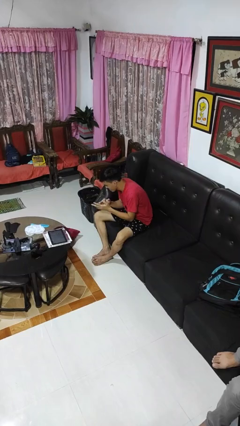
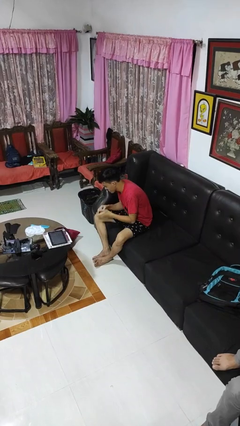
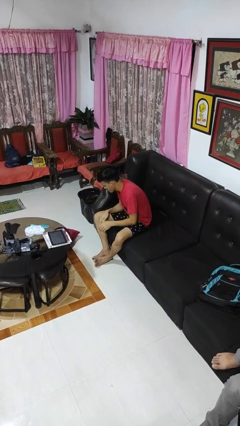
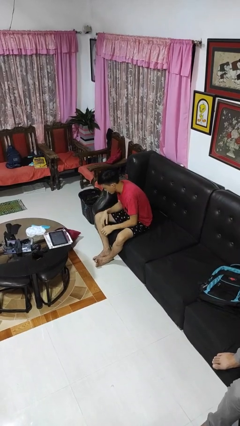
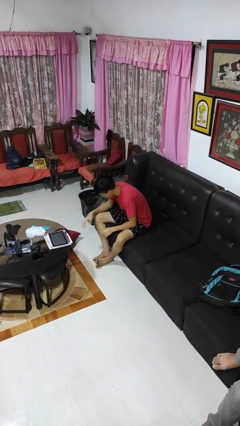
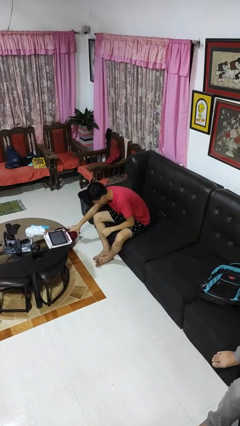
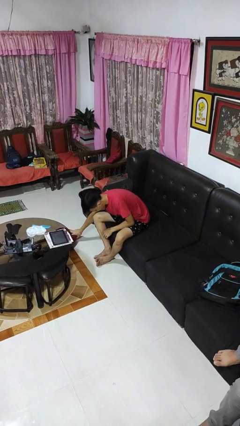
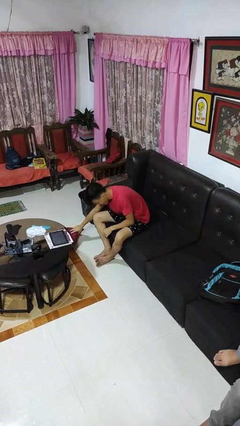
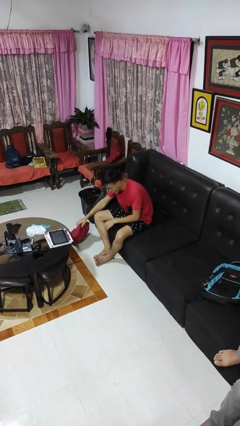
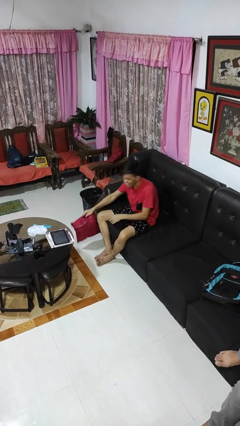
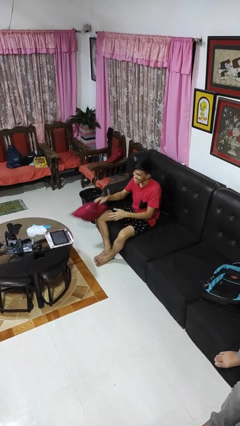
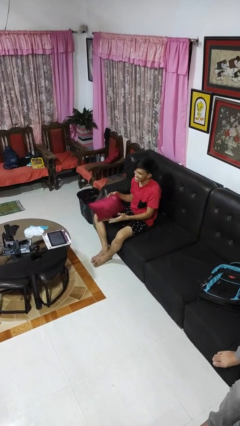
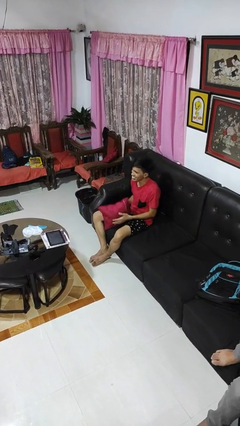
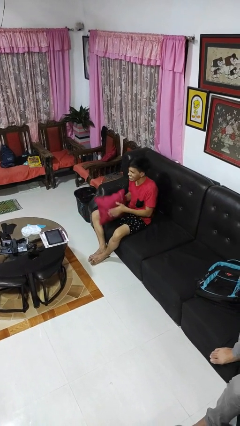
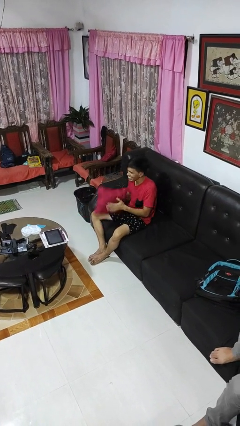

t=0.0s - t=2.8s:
person picks up object from floor

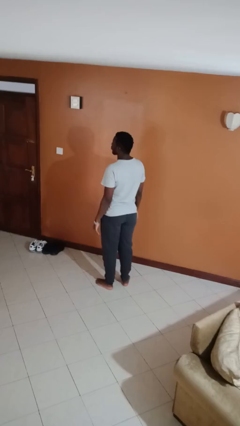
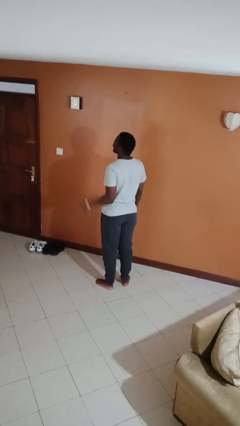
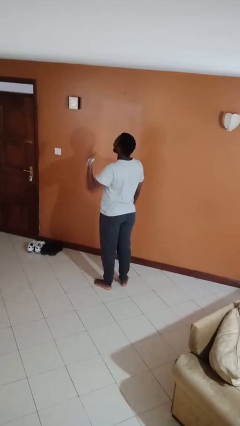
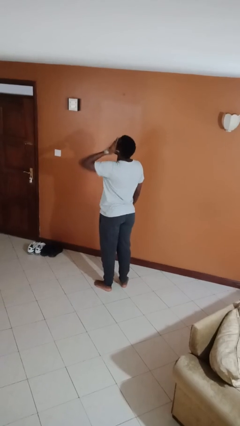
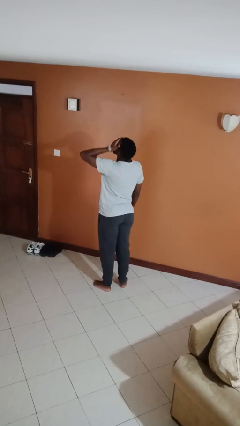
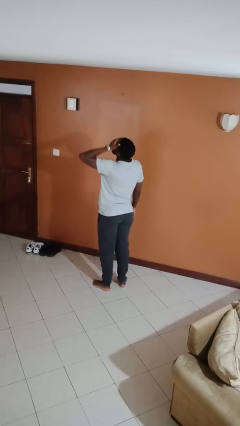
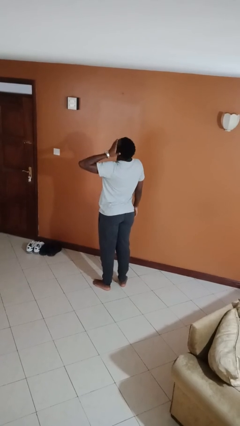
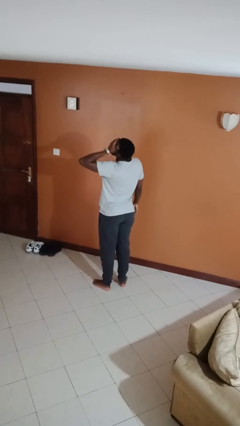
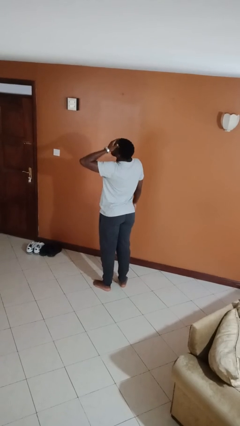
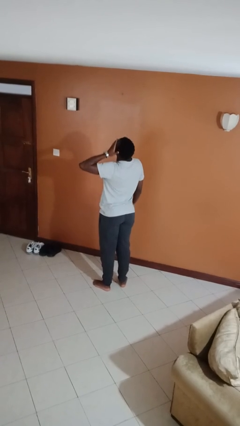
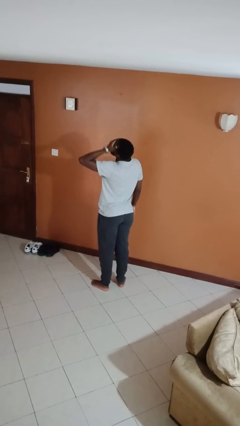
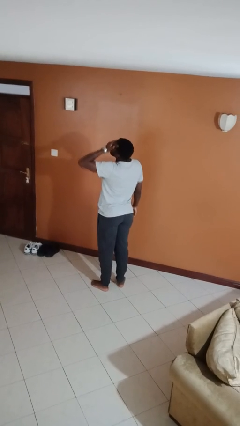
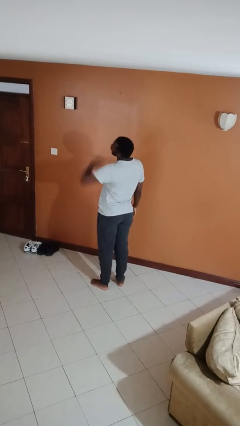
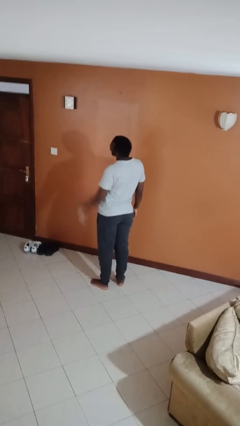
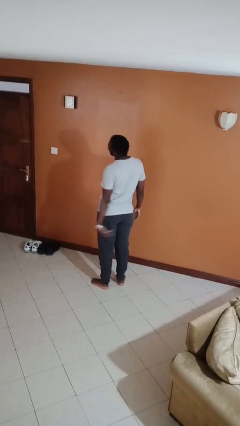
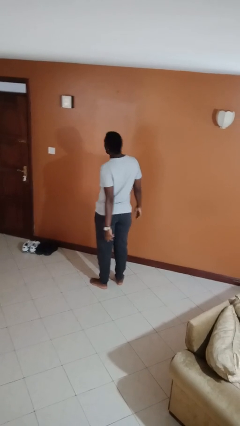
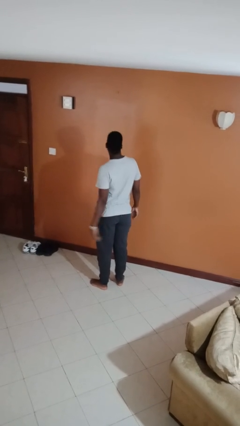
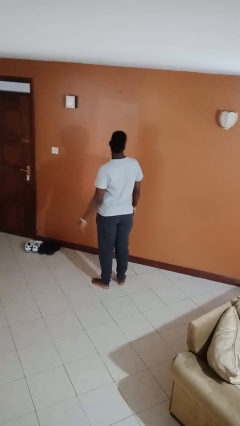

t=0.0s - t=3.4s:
person rubs eyes

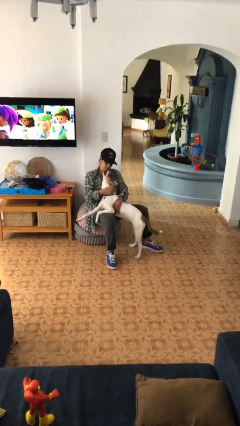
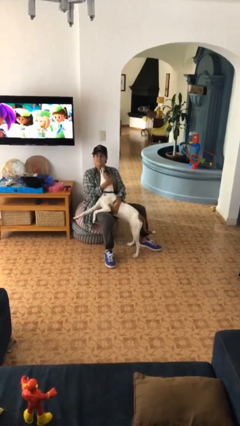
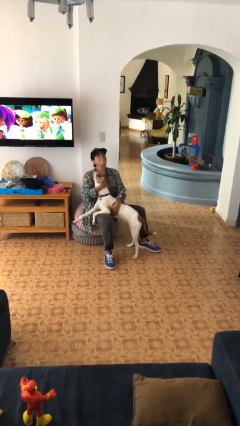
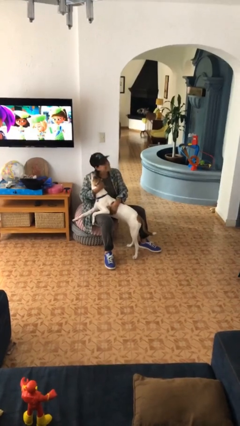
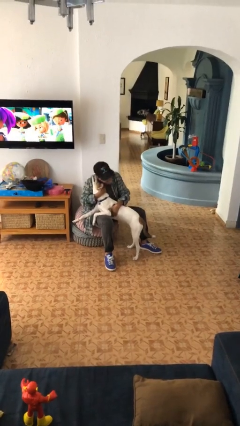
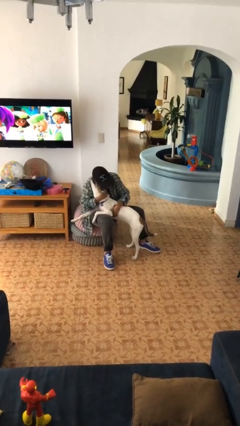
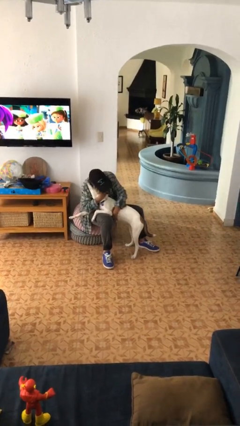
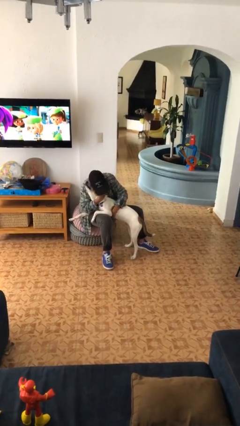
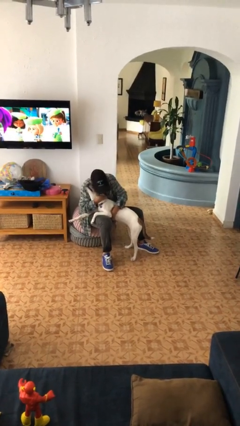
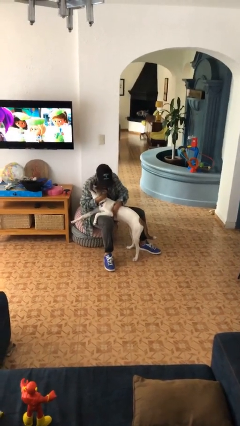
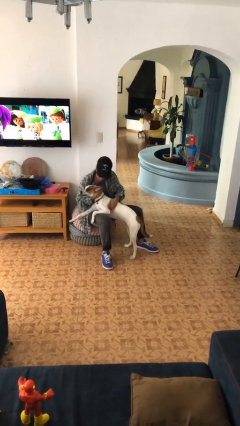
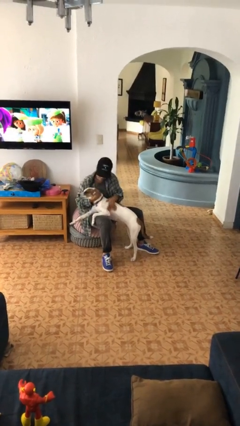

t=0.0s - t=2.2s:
person hugs dog

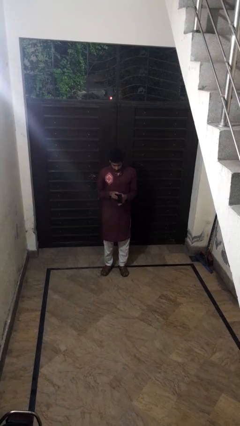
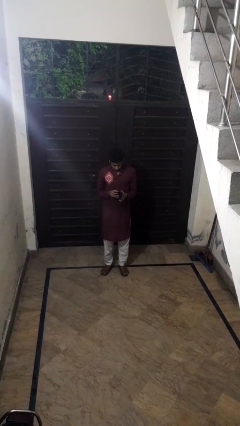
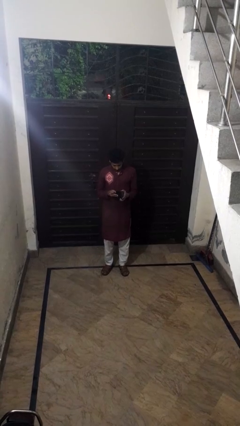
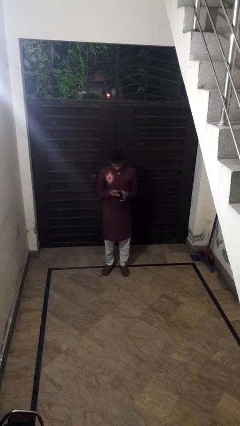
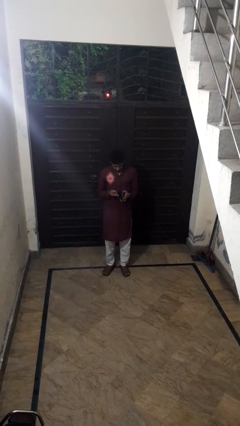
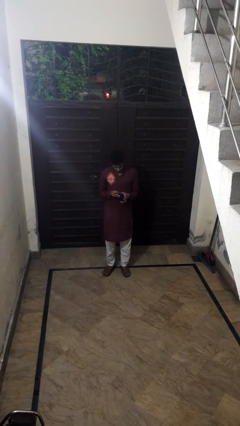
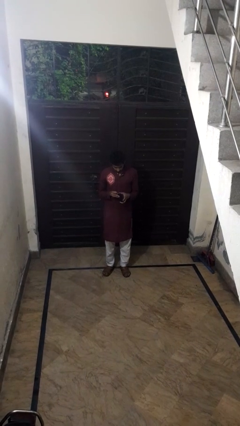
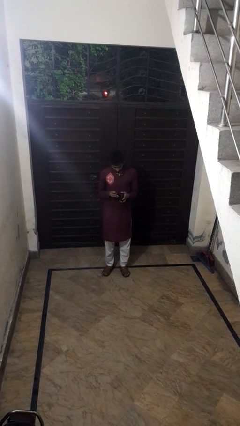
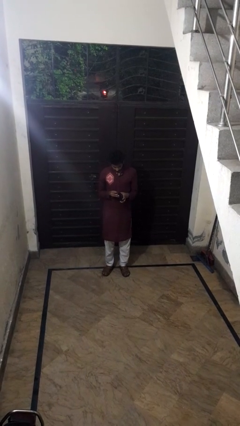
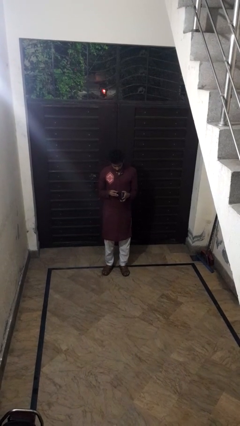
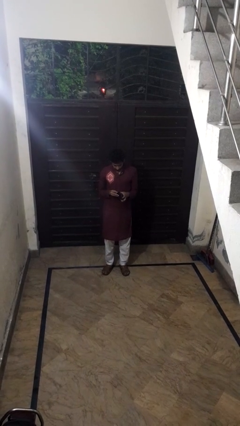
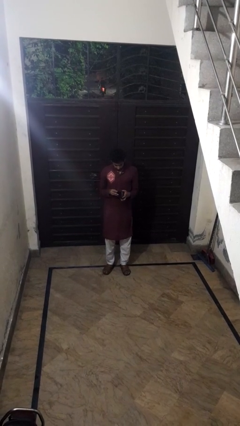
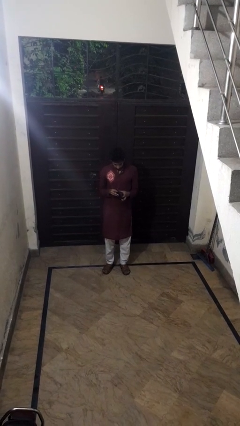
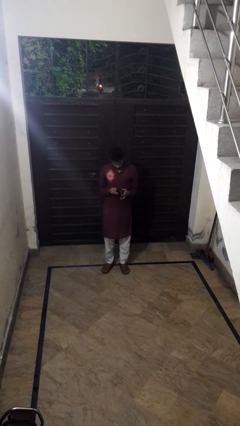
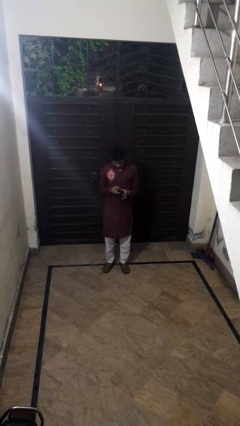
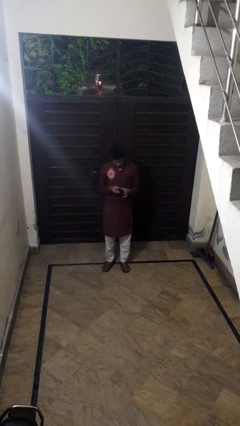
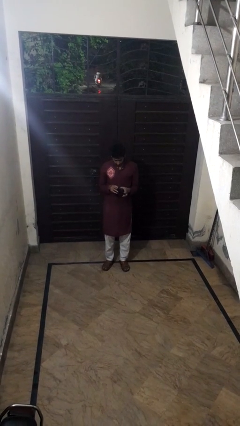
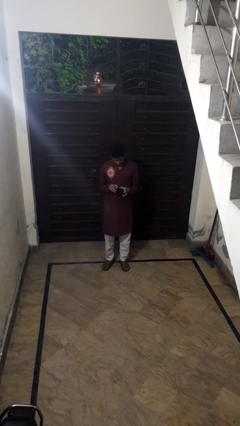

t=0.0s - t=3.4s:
person searches in purse

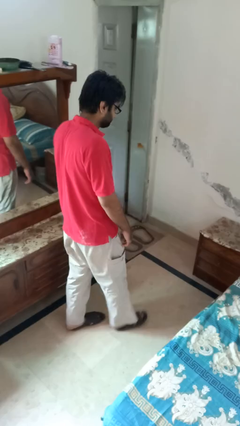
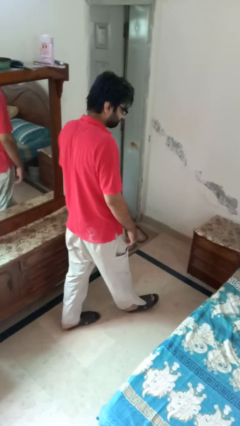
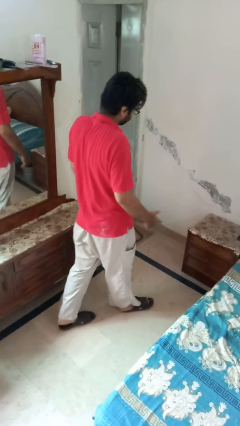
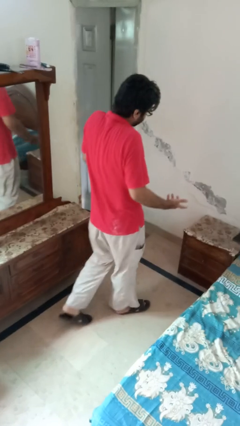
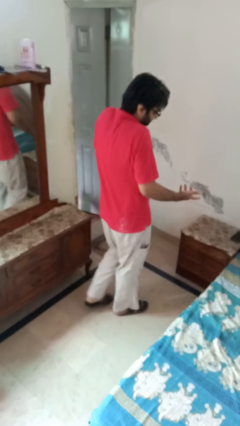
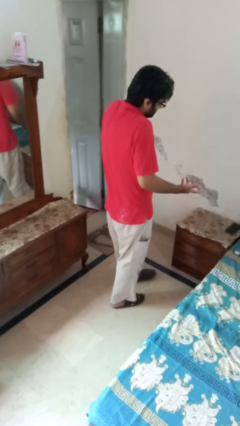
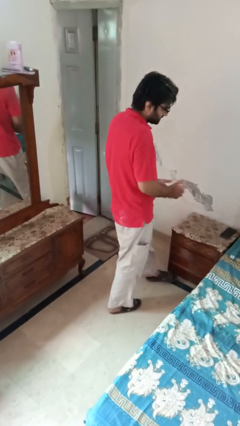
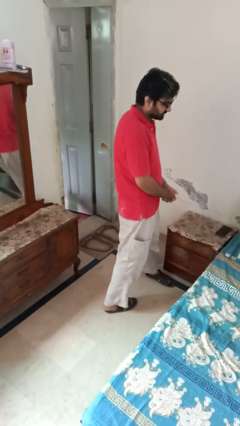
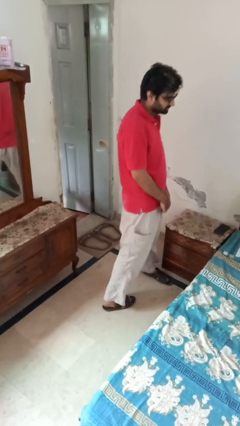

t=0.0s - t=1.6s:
person shrugs

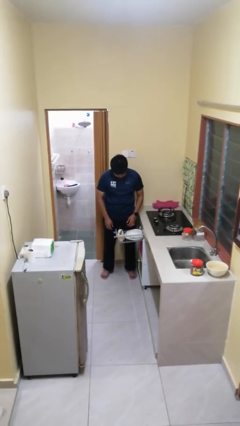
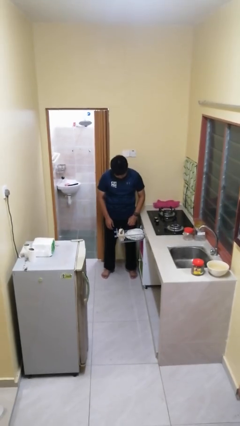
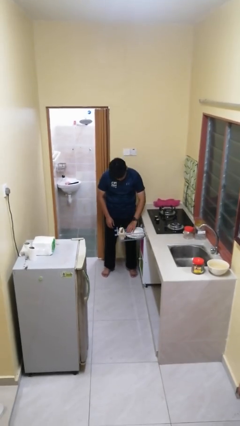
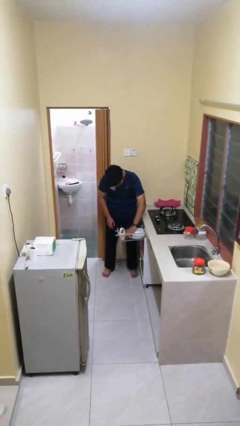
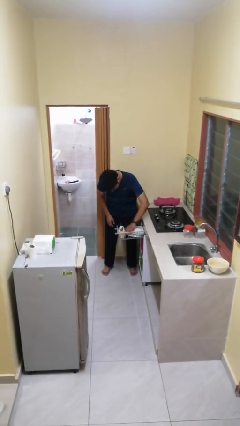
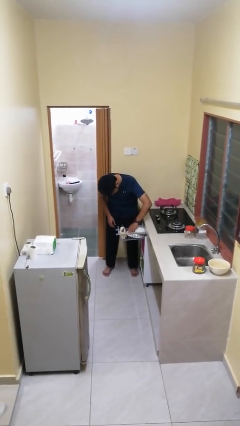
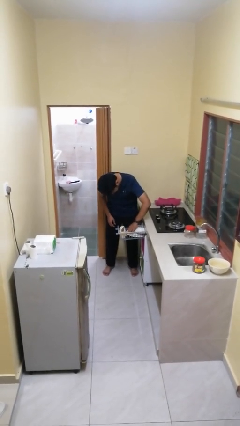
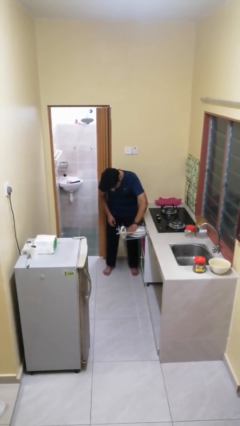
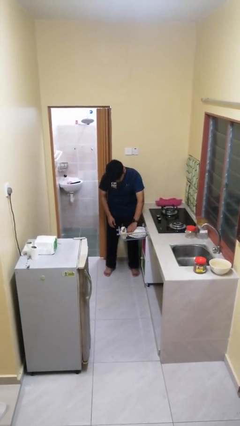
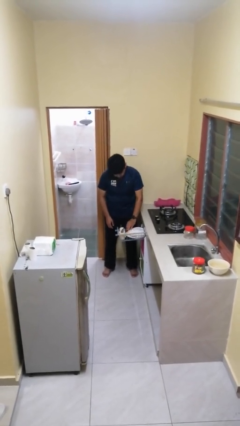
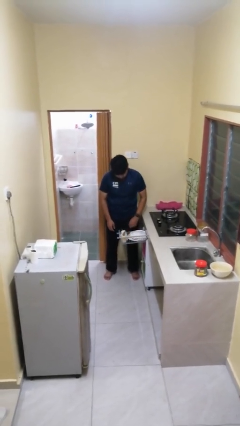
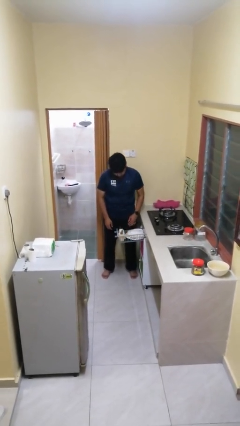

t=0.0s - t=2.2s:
person searches in kitchen drawer

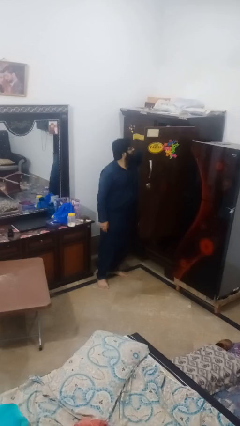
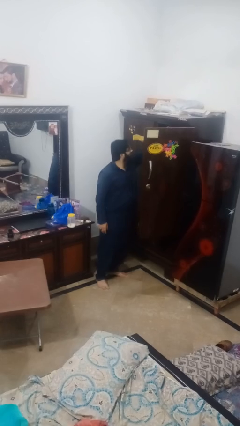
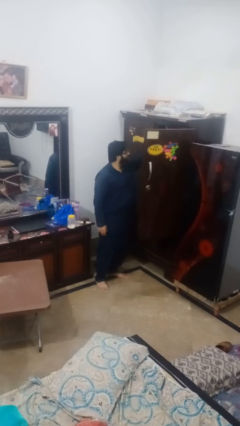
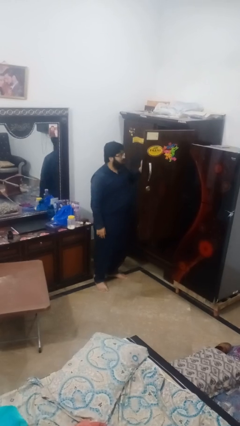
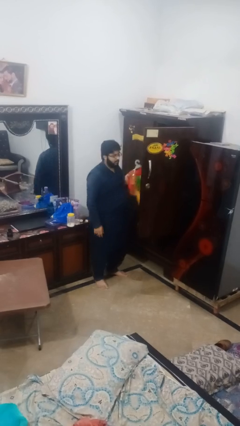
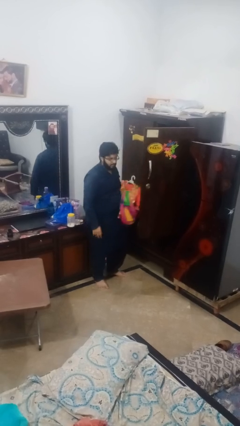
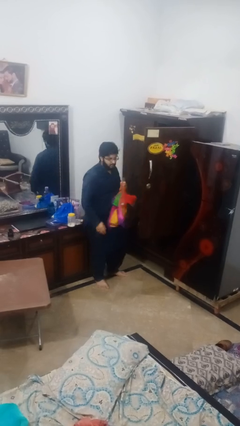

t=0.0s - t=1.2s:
person takes clothes from closet

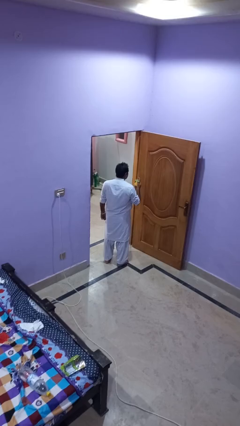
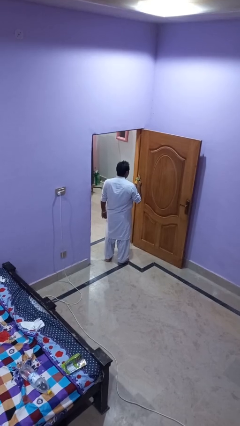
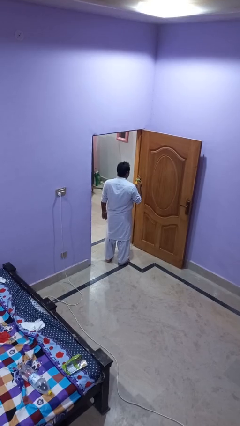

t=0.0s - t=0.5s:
person drinks from straw
